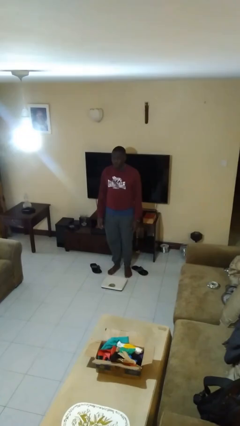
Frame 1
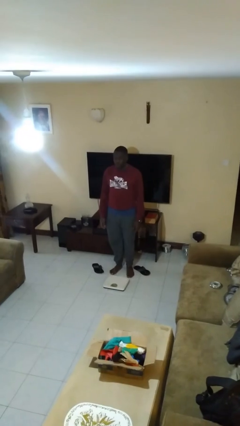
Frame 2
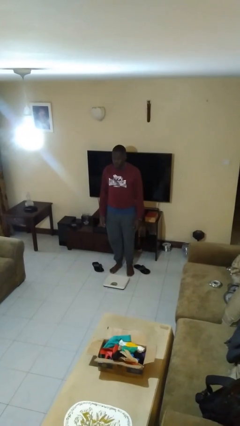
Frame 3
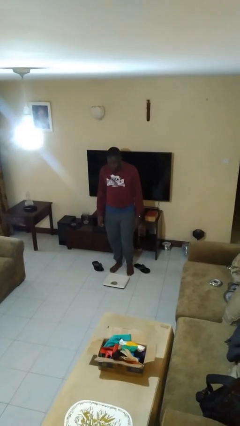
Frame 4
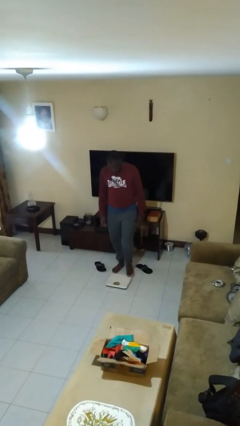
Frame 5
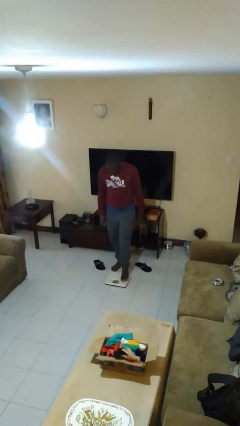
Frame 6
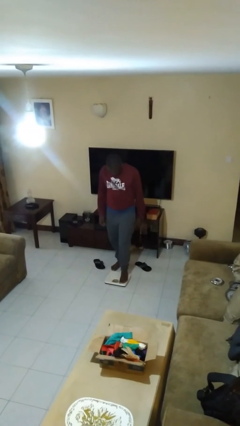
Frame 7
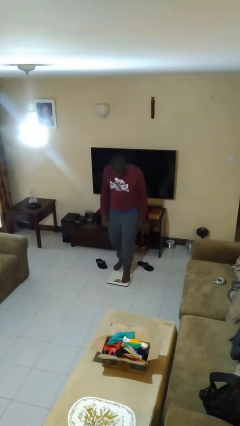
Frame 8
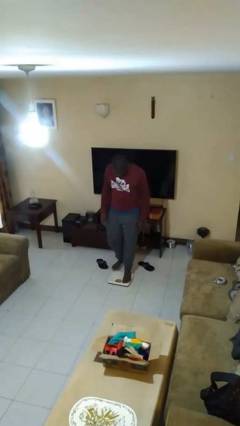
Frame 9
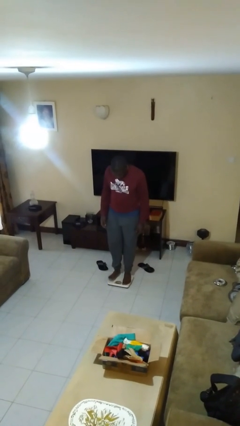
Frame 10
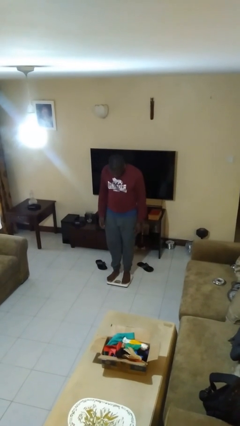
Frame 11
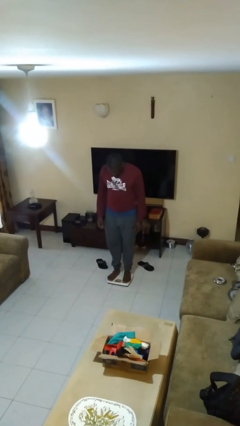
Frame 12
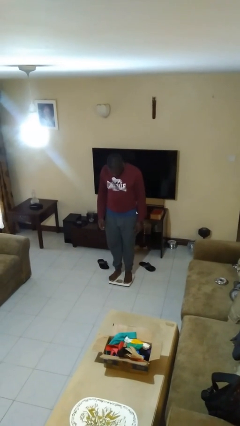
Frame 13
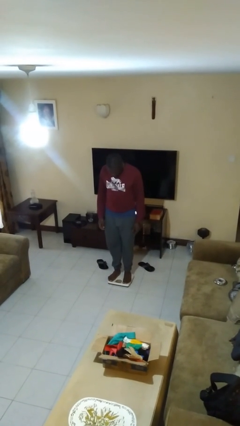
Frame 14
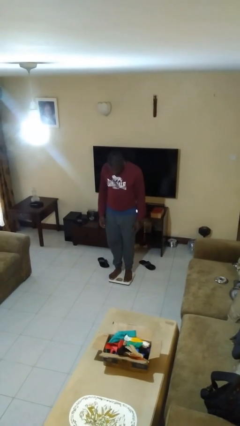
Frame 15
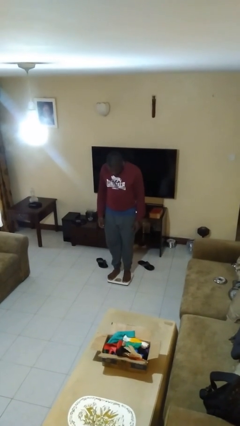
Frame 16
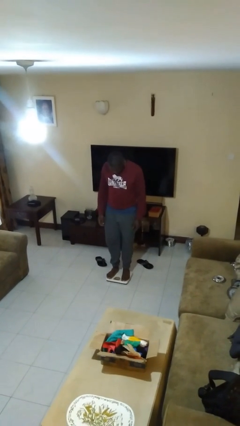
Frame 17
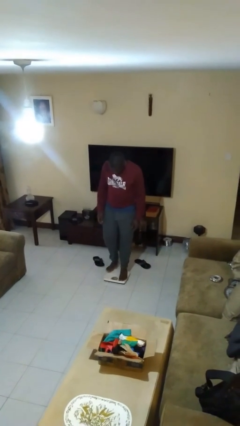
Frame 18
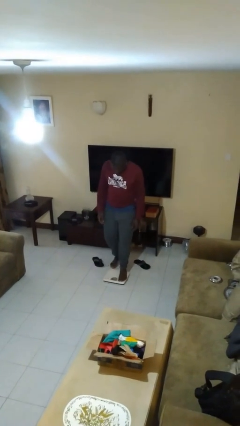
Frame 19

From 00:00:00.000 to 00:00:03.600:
person uses bodyweight scale

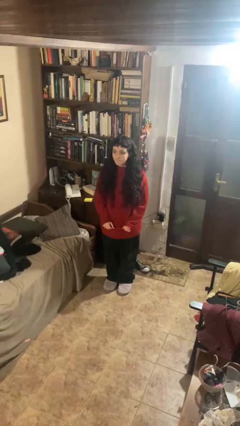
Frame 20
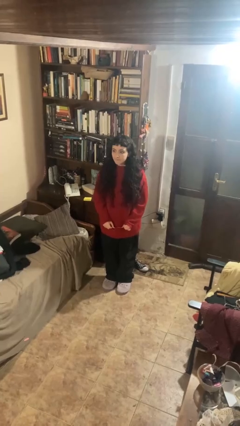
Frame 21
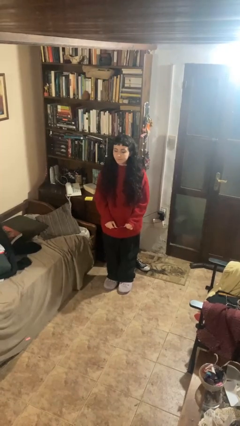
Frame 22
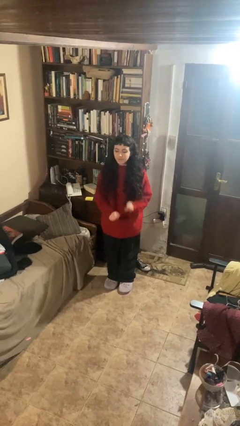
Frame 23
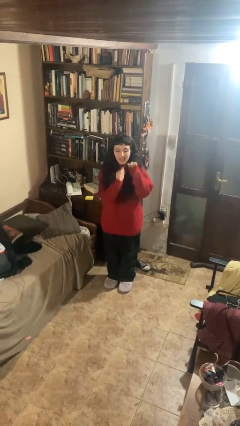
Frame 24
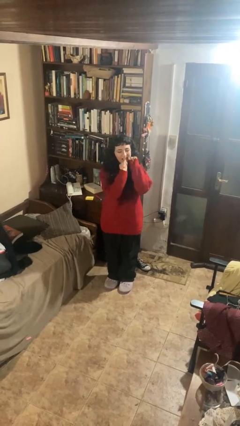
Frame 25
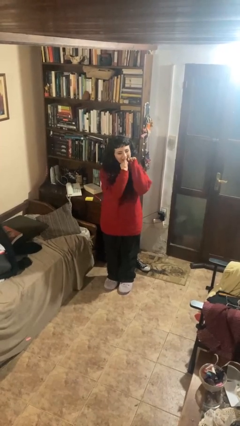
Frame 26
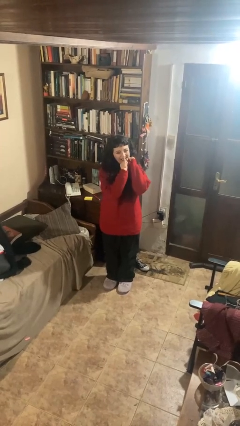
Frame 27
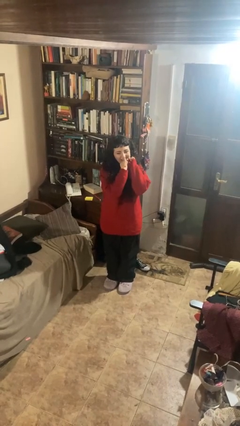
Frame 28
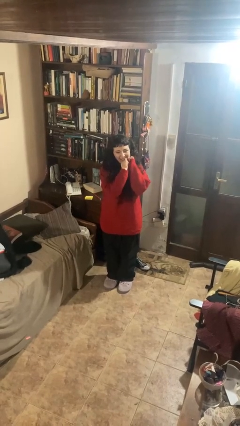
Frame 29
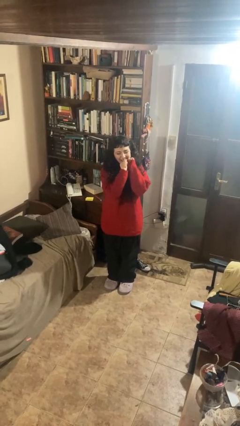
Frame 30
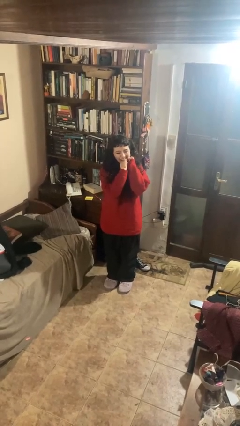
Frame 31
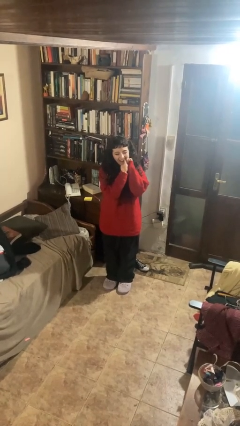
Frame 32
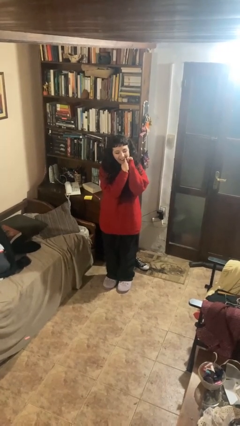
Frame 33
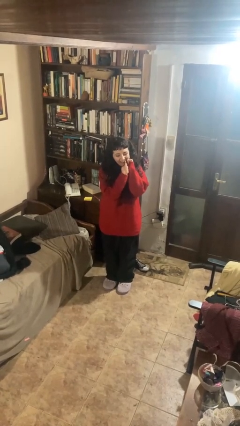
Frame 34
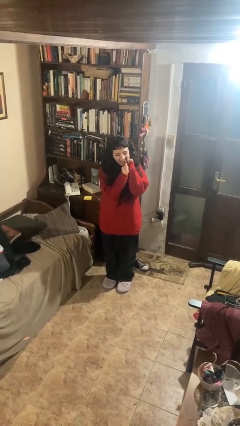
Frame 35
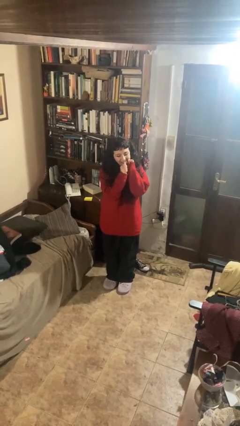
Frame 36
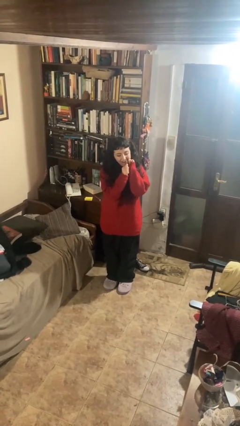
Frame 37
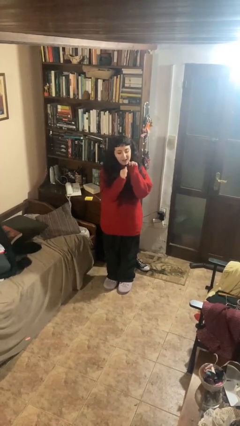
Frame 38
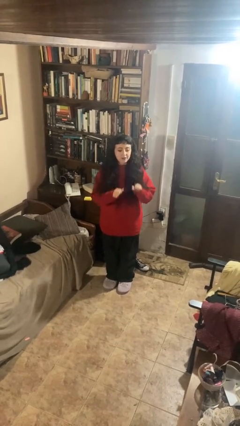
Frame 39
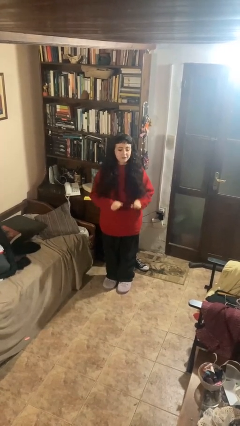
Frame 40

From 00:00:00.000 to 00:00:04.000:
person flosses

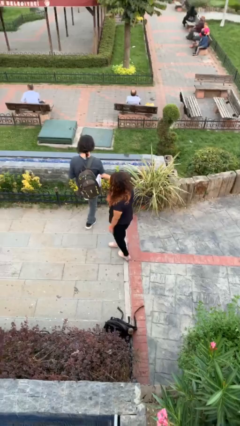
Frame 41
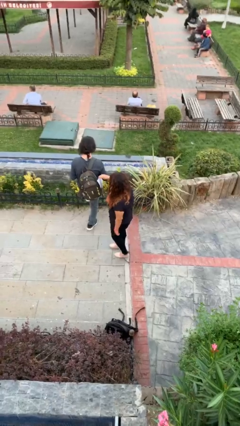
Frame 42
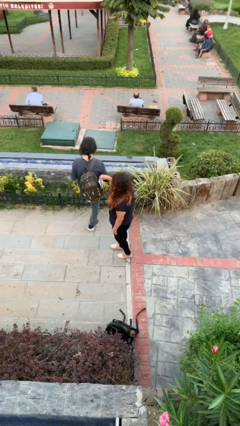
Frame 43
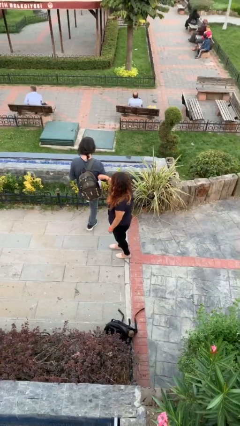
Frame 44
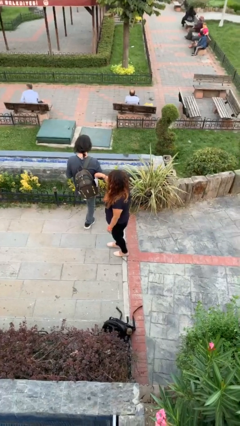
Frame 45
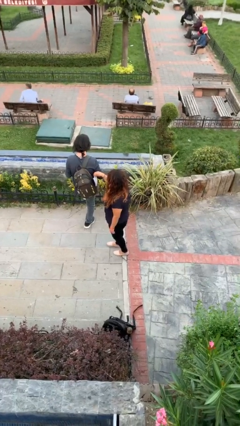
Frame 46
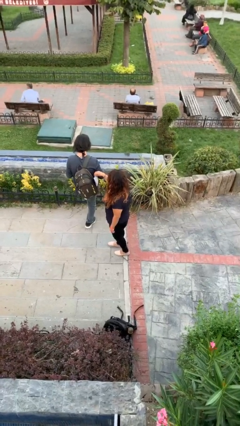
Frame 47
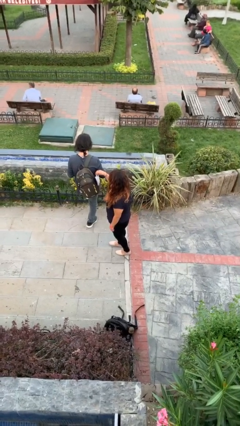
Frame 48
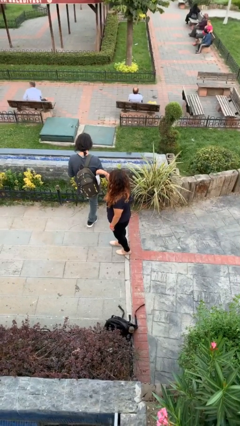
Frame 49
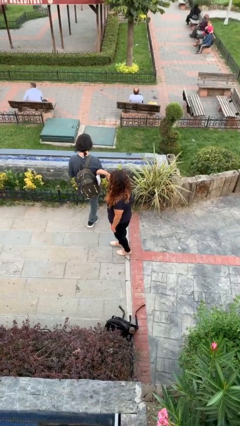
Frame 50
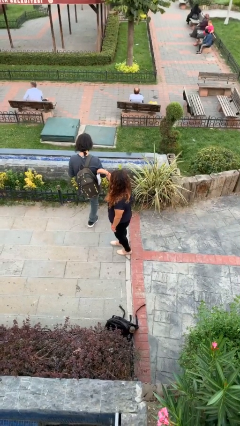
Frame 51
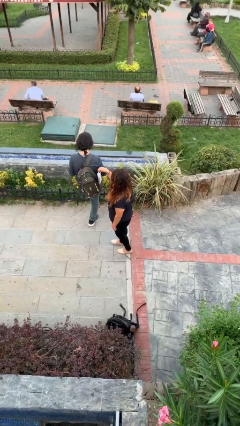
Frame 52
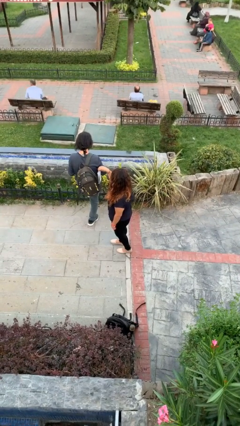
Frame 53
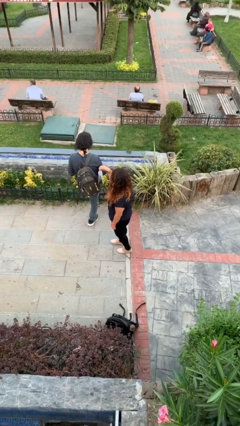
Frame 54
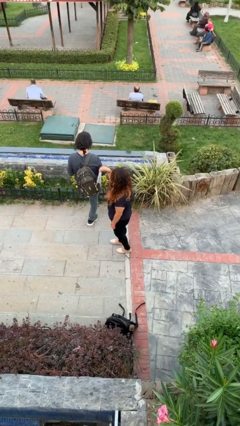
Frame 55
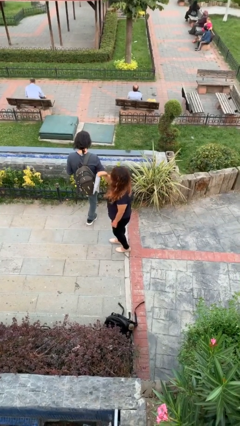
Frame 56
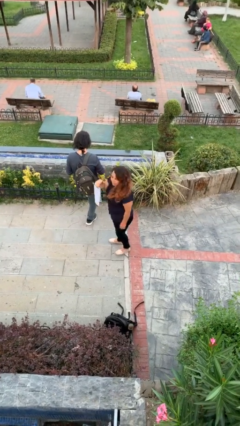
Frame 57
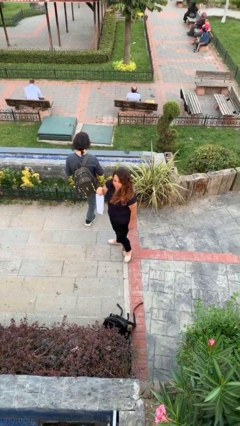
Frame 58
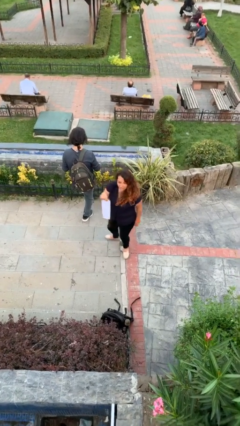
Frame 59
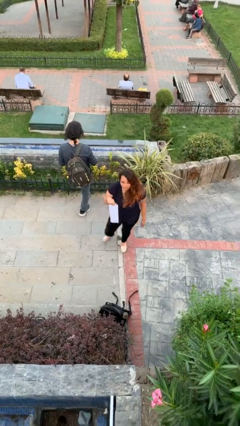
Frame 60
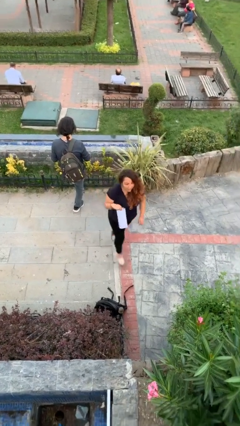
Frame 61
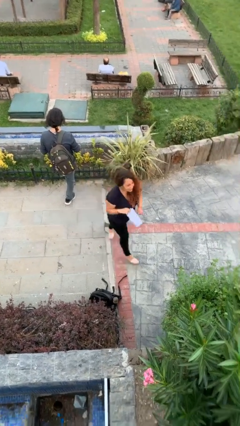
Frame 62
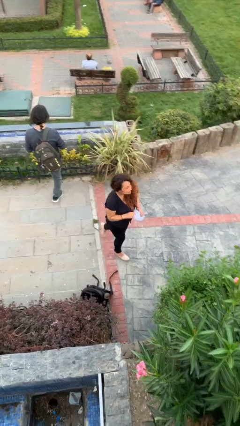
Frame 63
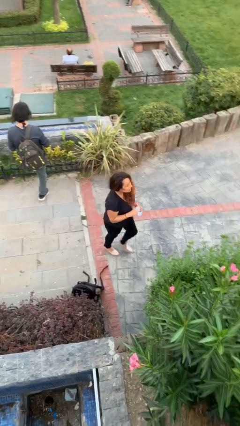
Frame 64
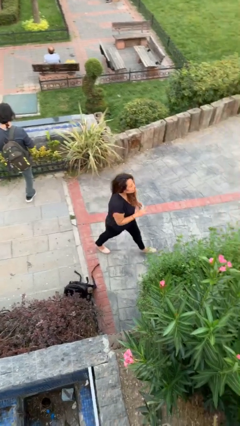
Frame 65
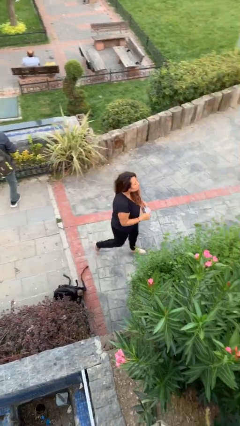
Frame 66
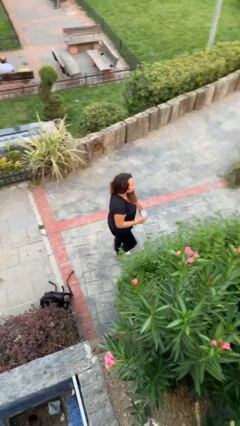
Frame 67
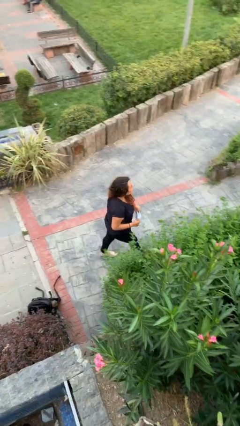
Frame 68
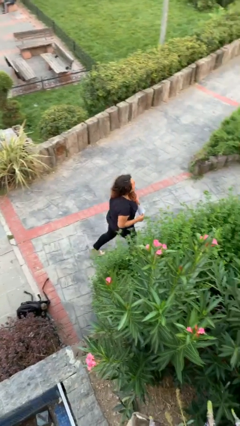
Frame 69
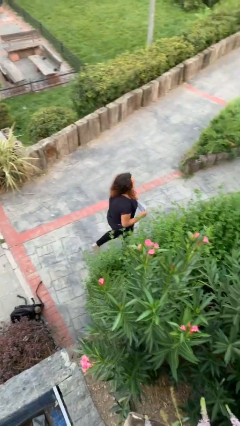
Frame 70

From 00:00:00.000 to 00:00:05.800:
person steals object from person

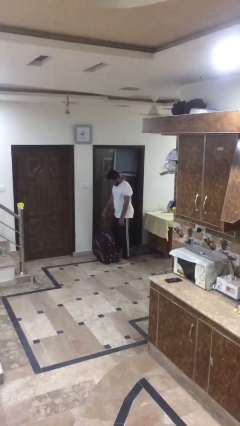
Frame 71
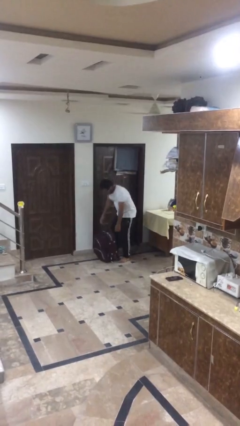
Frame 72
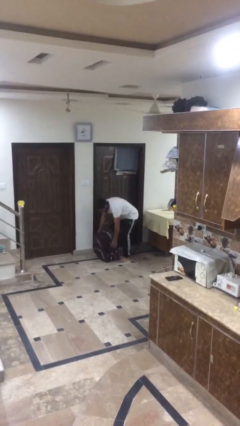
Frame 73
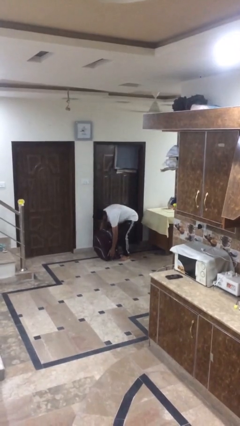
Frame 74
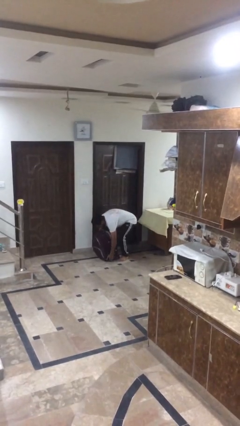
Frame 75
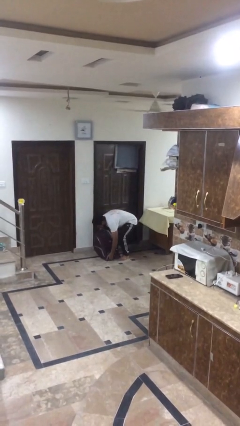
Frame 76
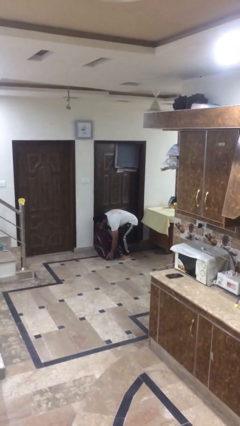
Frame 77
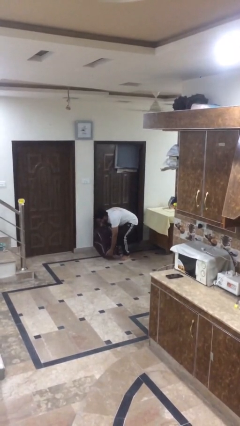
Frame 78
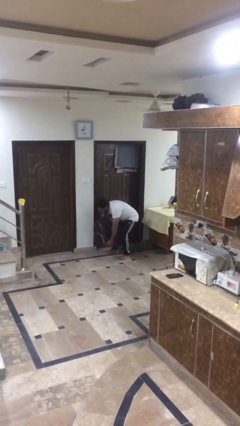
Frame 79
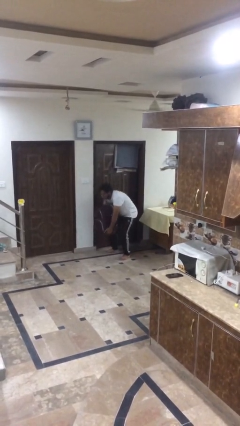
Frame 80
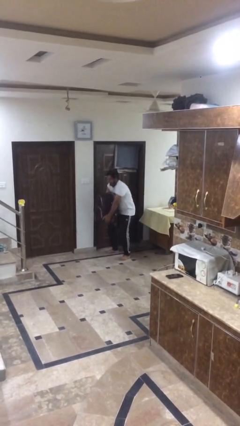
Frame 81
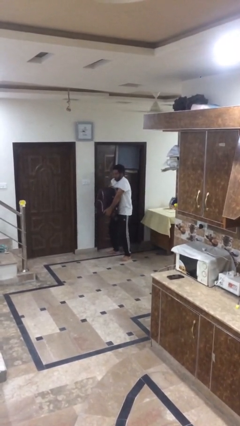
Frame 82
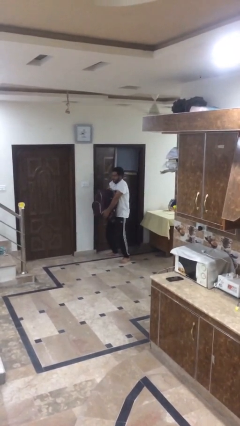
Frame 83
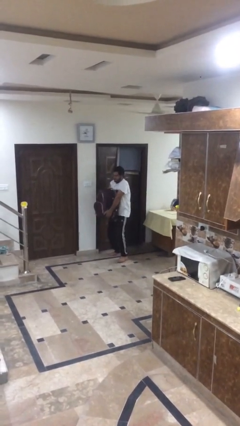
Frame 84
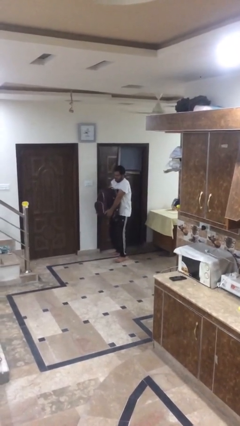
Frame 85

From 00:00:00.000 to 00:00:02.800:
person picks up object from floor

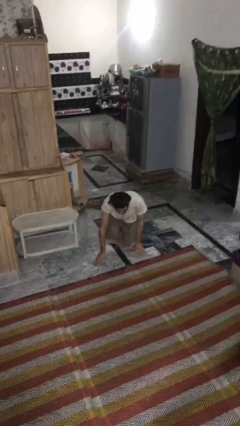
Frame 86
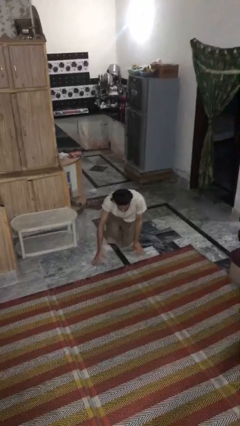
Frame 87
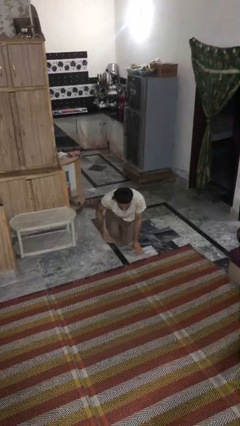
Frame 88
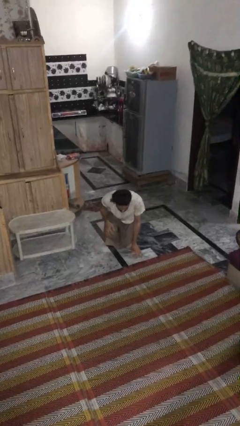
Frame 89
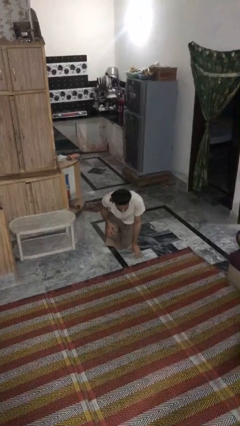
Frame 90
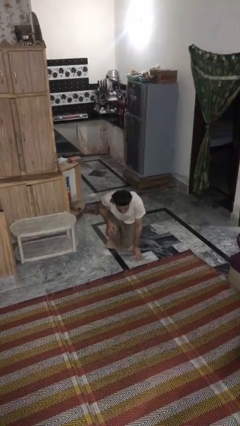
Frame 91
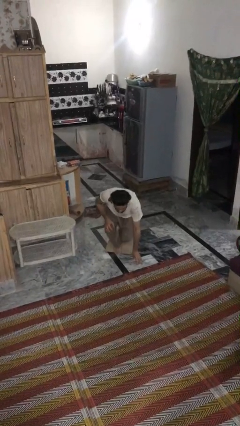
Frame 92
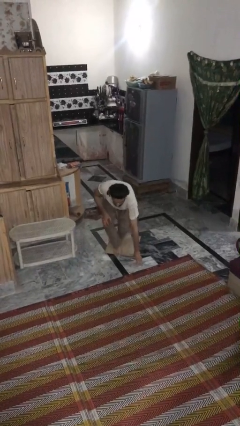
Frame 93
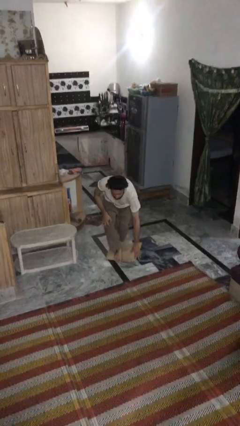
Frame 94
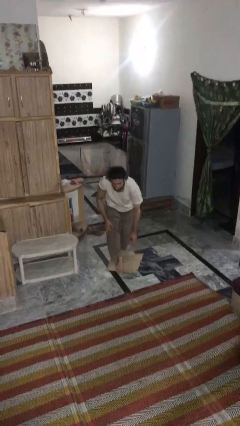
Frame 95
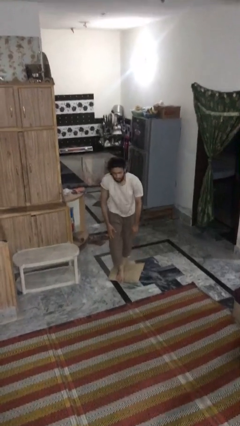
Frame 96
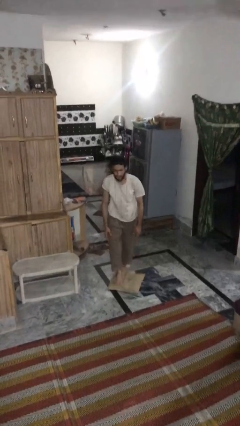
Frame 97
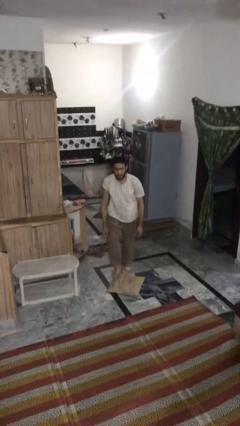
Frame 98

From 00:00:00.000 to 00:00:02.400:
person stands up from floor
